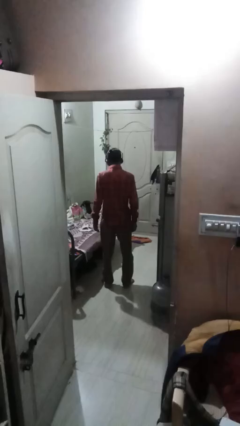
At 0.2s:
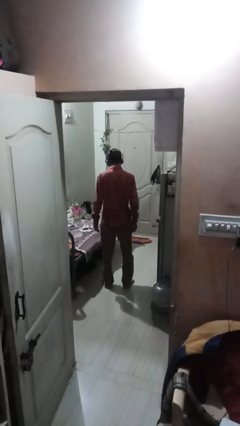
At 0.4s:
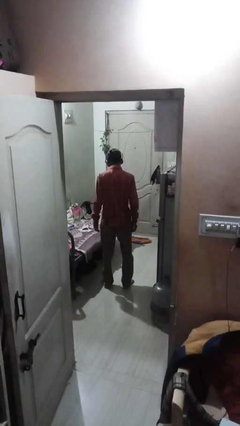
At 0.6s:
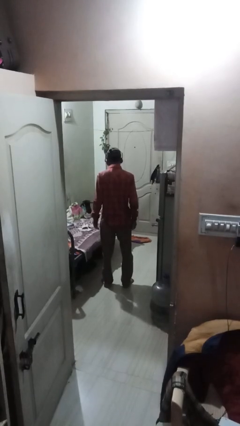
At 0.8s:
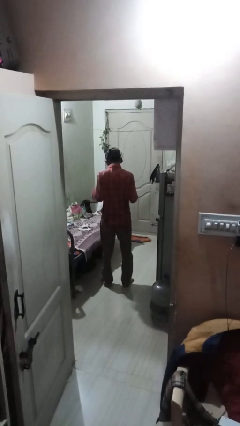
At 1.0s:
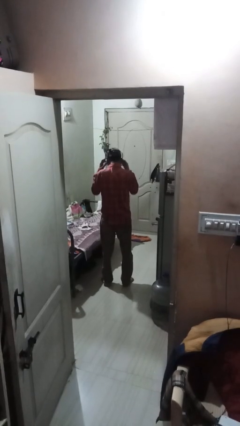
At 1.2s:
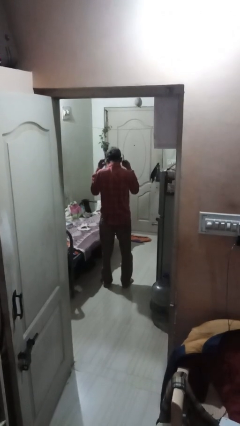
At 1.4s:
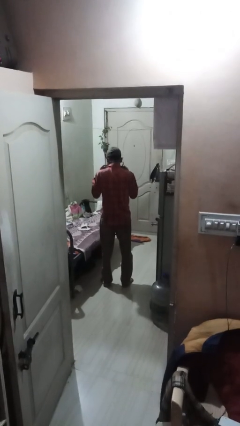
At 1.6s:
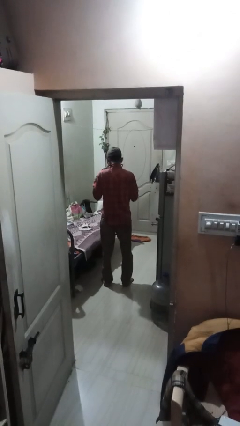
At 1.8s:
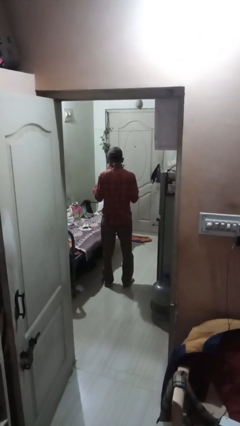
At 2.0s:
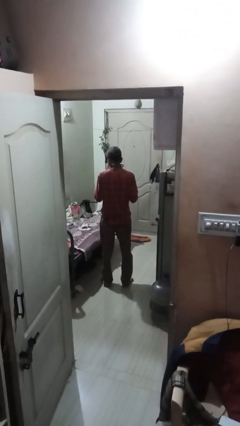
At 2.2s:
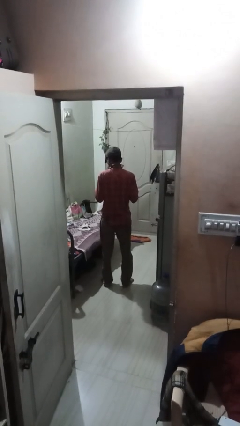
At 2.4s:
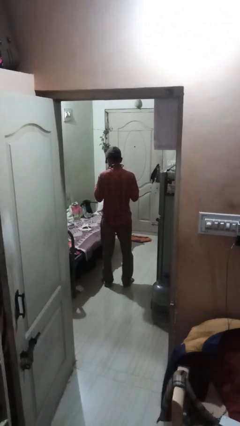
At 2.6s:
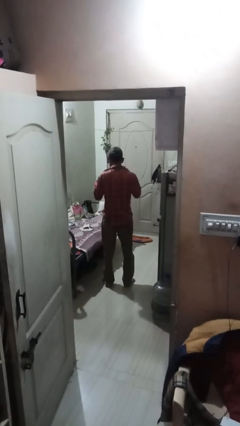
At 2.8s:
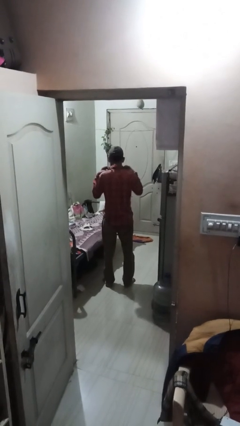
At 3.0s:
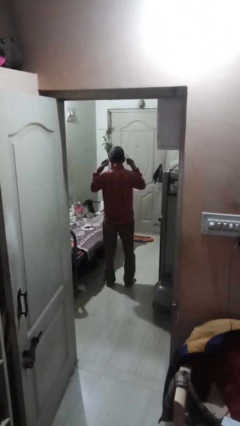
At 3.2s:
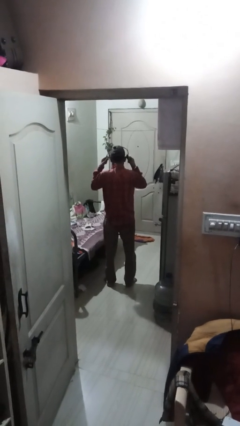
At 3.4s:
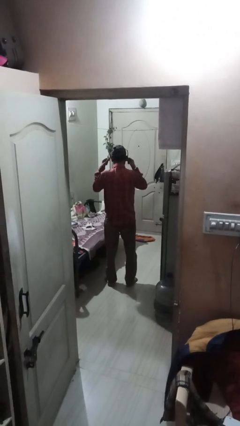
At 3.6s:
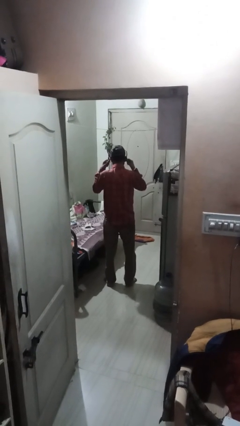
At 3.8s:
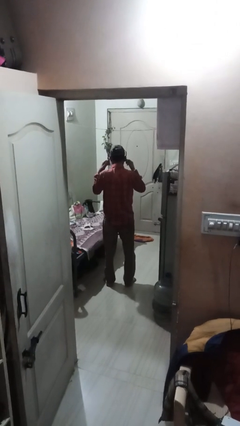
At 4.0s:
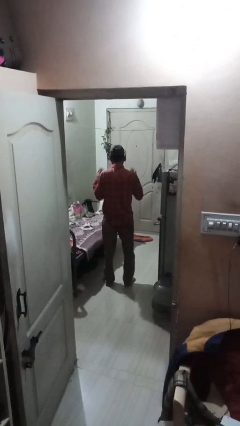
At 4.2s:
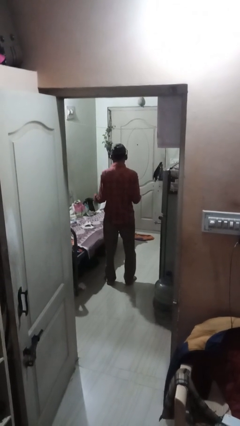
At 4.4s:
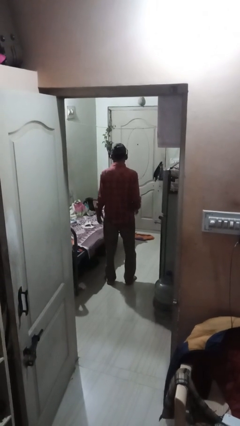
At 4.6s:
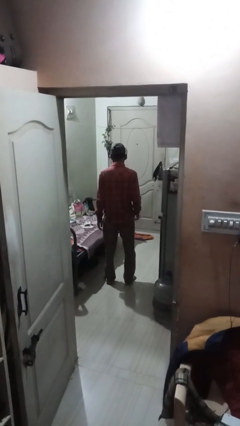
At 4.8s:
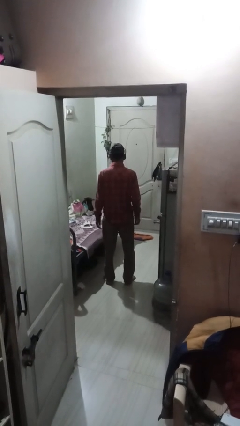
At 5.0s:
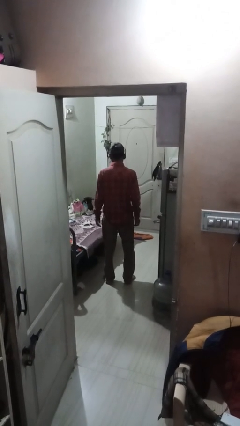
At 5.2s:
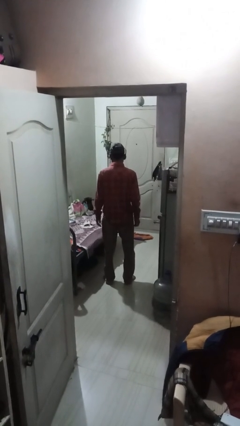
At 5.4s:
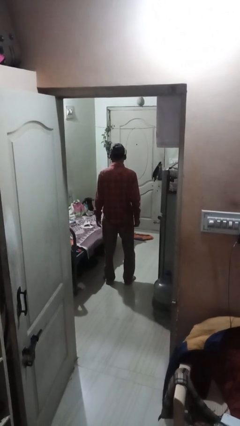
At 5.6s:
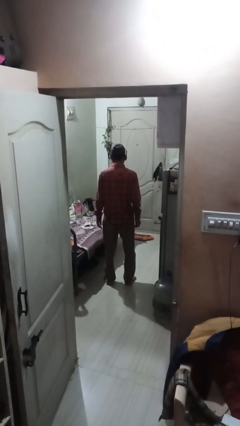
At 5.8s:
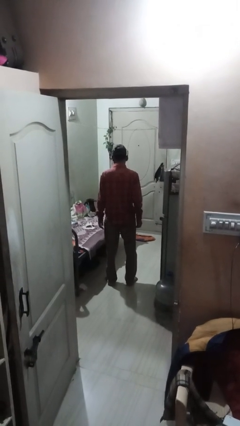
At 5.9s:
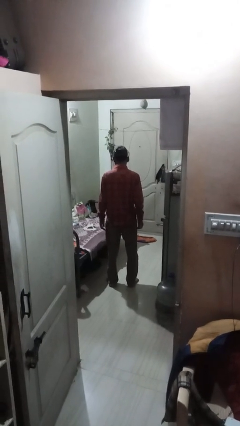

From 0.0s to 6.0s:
person puts on headphones

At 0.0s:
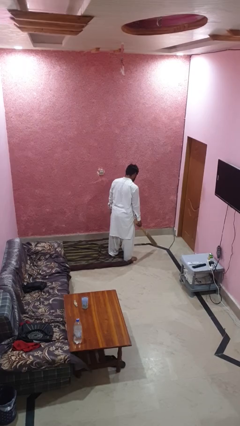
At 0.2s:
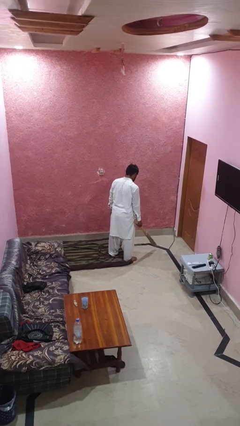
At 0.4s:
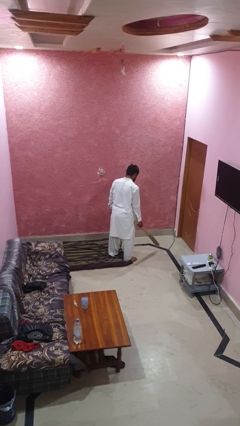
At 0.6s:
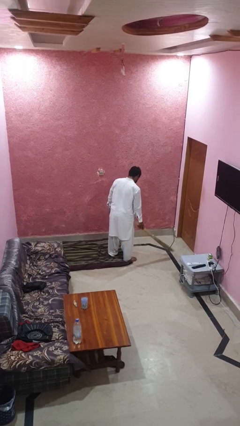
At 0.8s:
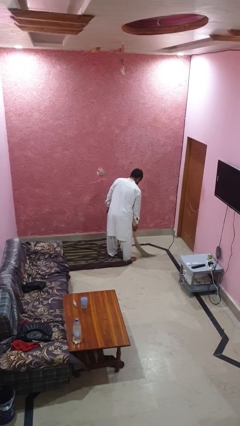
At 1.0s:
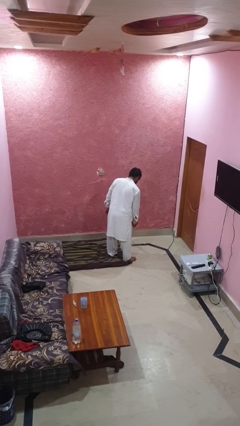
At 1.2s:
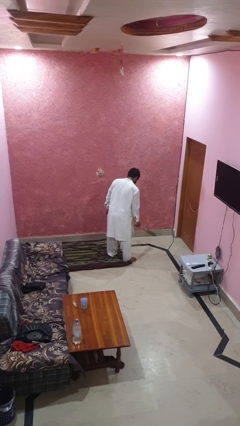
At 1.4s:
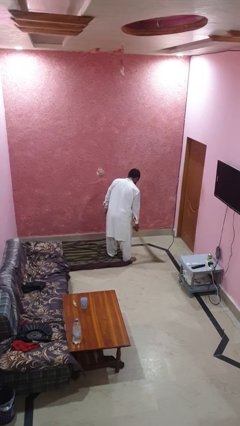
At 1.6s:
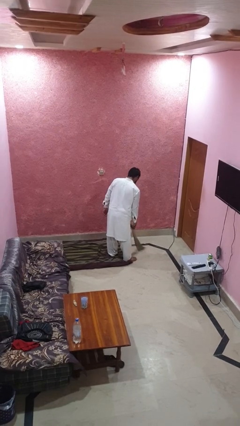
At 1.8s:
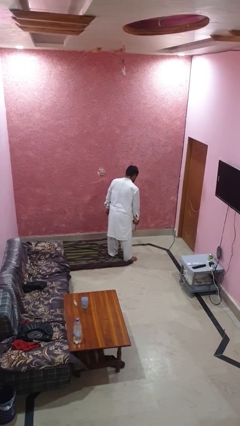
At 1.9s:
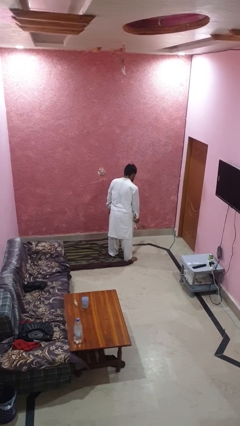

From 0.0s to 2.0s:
person sweeps floor

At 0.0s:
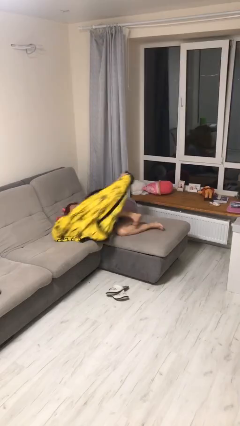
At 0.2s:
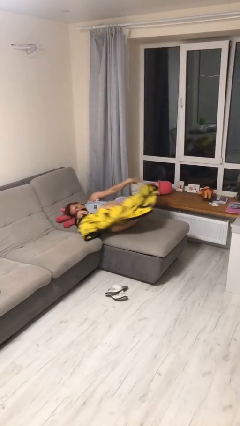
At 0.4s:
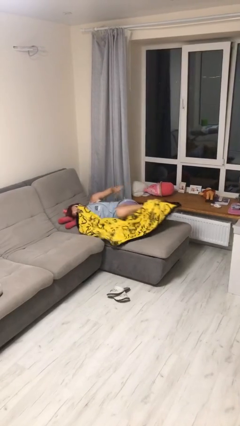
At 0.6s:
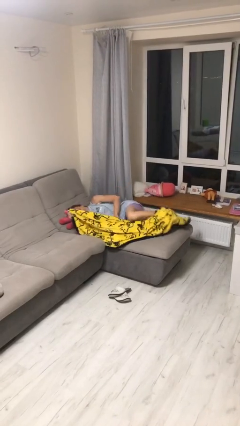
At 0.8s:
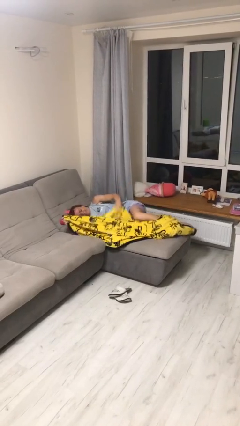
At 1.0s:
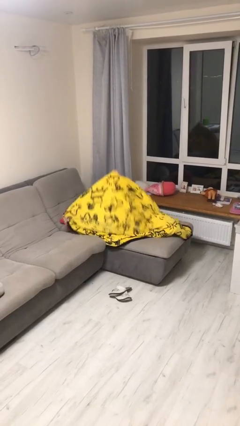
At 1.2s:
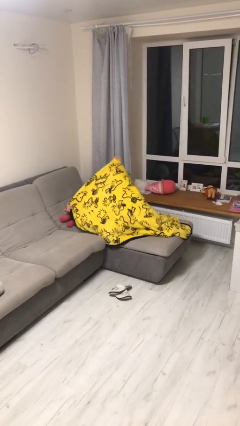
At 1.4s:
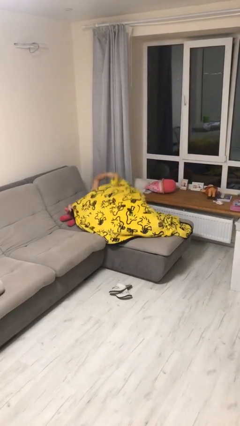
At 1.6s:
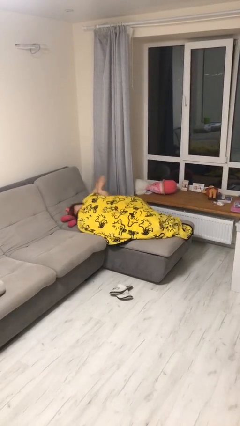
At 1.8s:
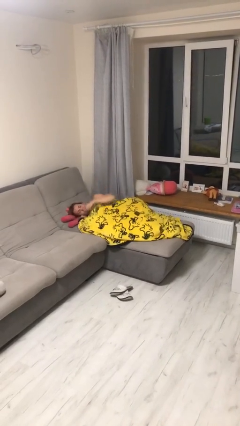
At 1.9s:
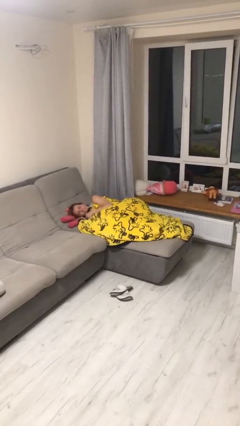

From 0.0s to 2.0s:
person covers with bedsheets

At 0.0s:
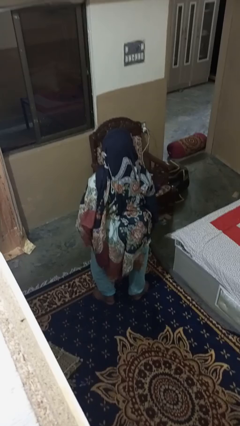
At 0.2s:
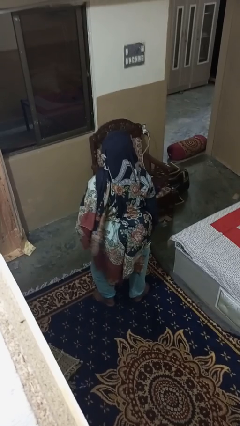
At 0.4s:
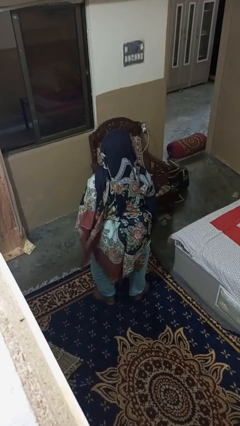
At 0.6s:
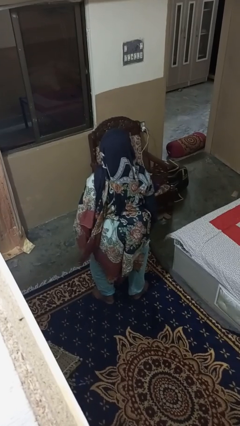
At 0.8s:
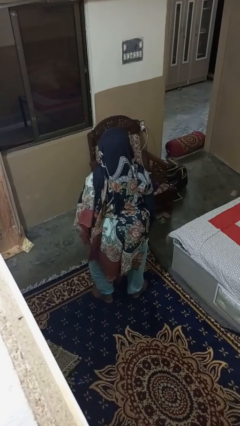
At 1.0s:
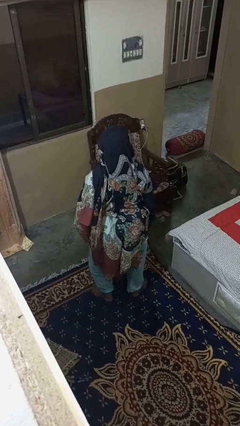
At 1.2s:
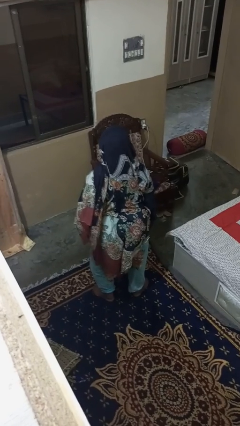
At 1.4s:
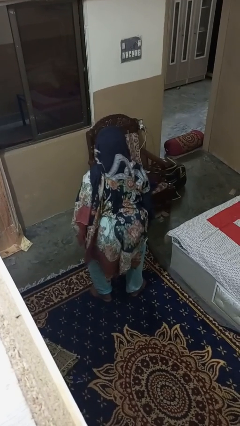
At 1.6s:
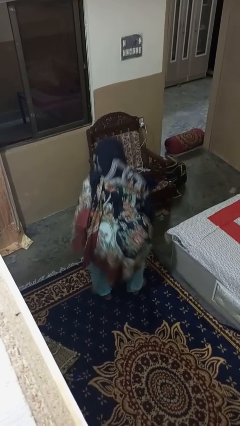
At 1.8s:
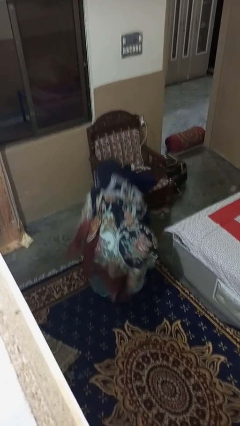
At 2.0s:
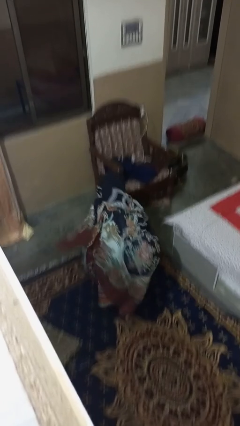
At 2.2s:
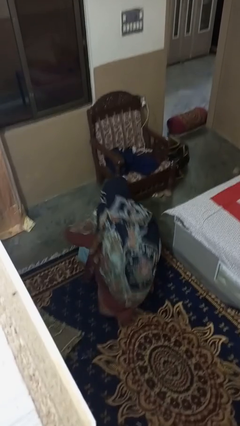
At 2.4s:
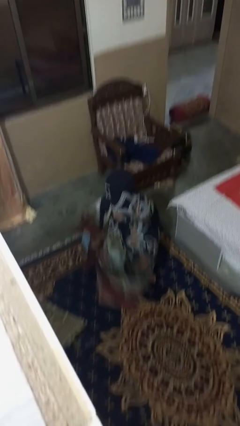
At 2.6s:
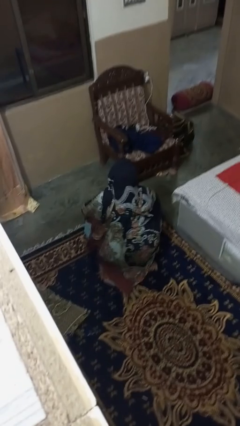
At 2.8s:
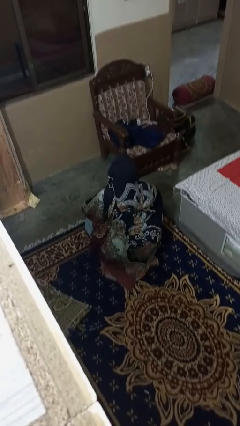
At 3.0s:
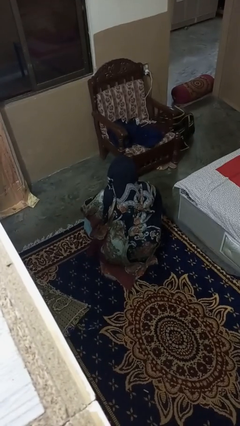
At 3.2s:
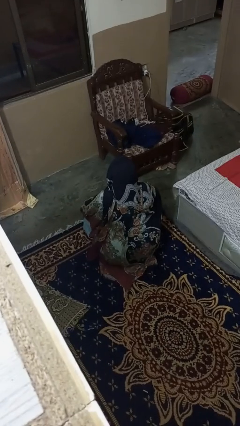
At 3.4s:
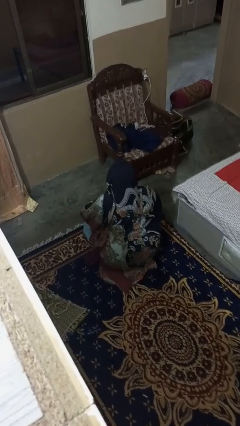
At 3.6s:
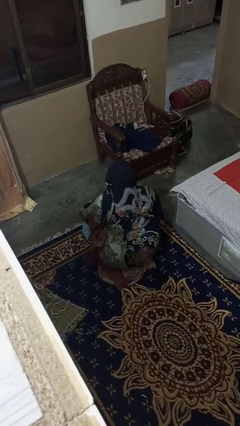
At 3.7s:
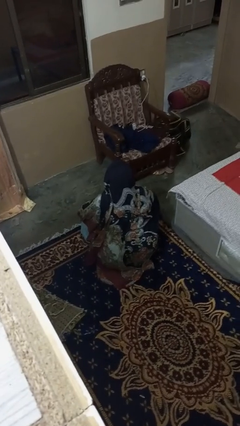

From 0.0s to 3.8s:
person squats

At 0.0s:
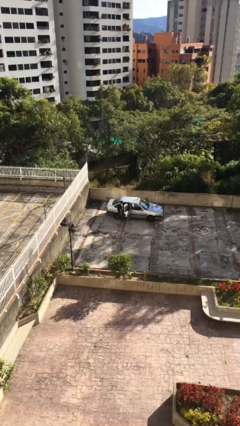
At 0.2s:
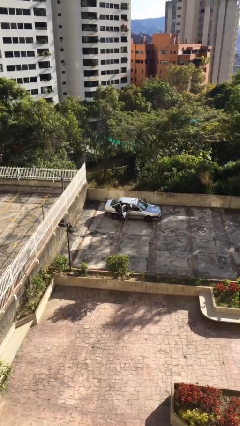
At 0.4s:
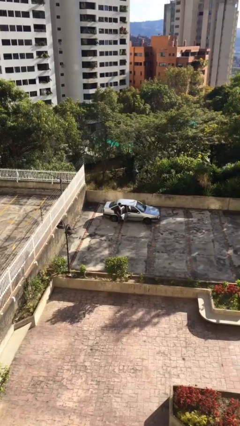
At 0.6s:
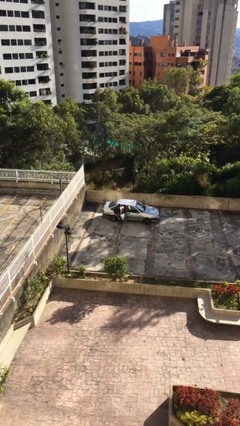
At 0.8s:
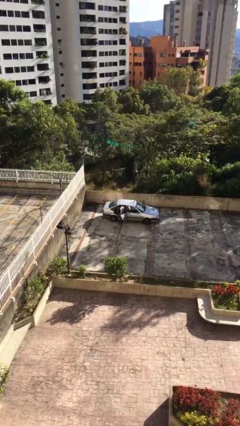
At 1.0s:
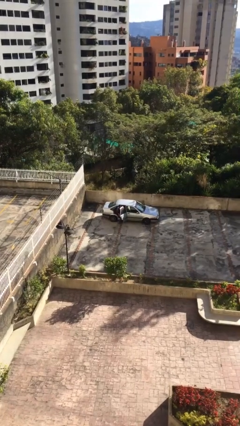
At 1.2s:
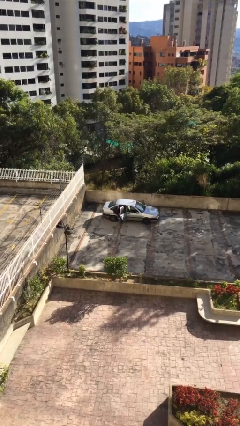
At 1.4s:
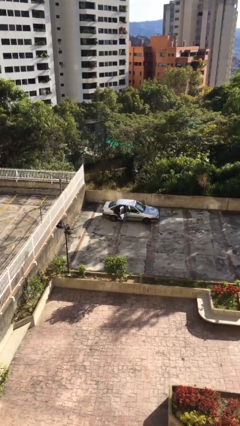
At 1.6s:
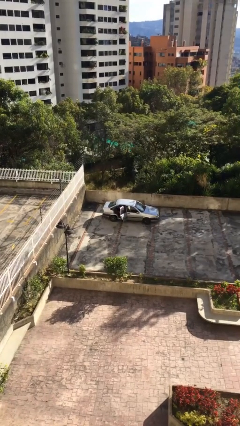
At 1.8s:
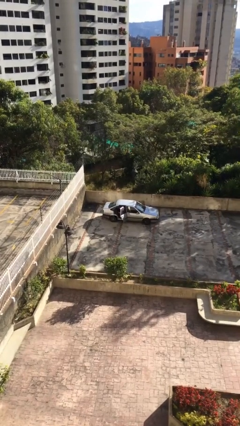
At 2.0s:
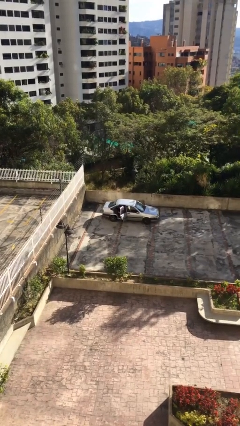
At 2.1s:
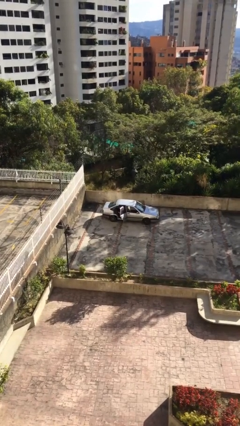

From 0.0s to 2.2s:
person enters car

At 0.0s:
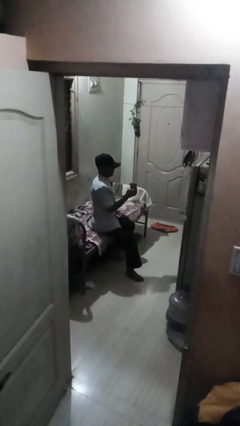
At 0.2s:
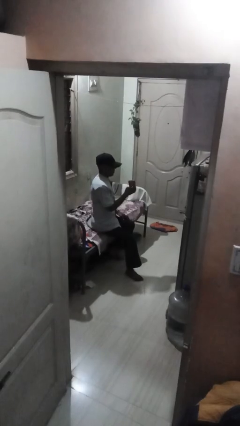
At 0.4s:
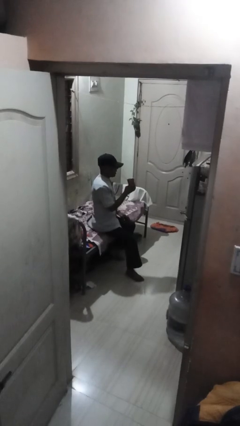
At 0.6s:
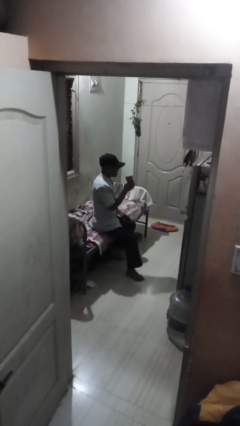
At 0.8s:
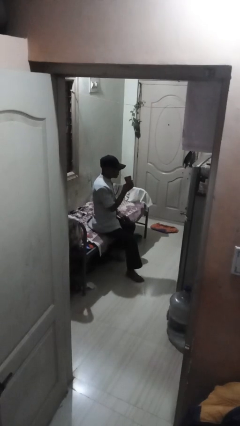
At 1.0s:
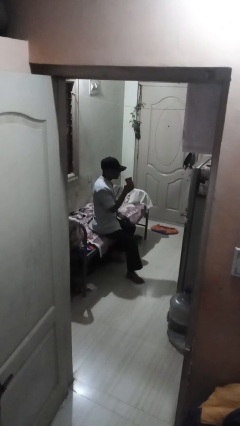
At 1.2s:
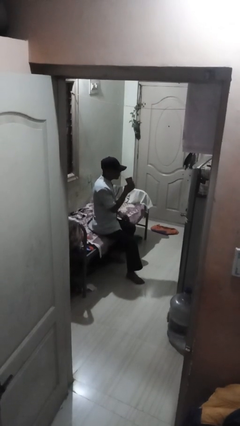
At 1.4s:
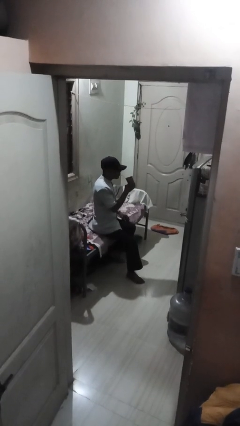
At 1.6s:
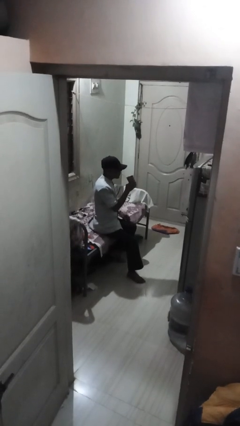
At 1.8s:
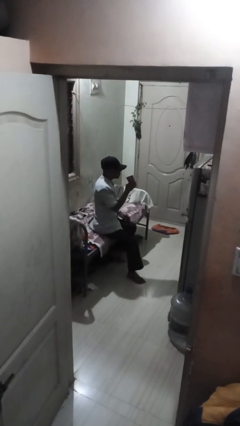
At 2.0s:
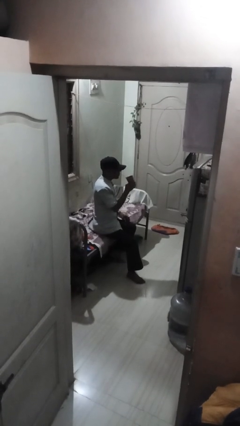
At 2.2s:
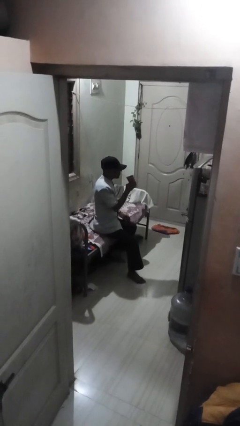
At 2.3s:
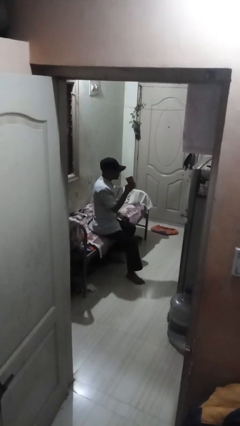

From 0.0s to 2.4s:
person drinks from straw
